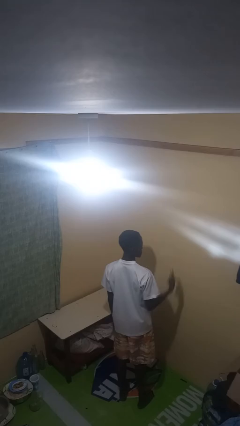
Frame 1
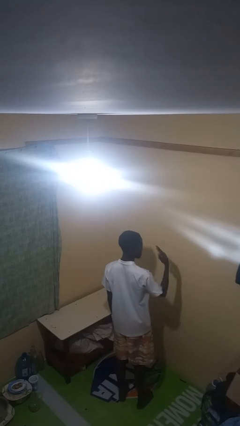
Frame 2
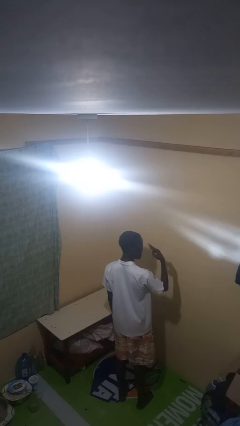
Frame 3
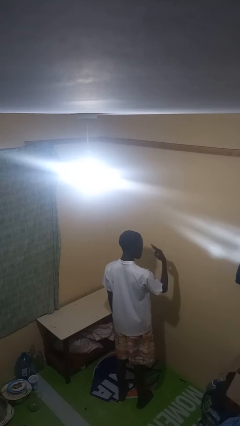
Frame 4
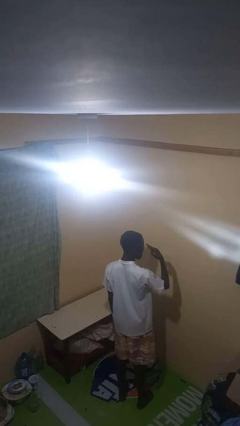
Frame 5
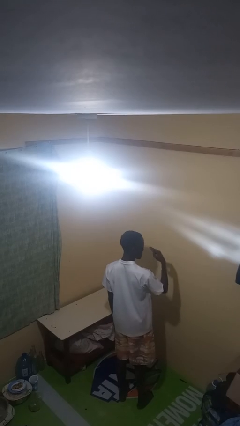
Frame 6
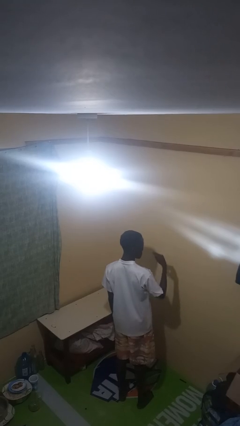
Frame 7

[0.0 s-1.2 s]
person gestures watch closely

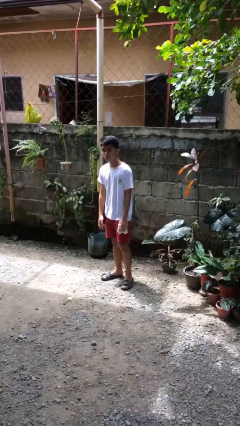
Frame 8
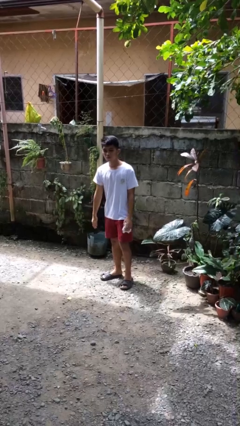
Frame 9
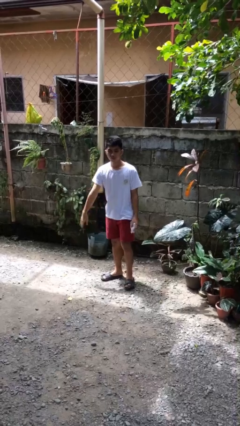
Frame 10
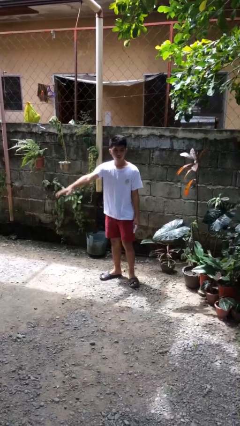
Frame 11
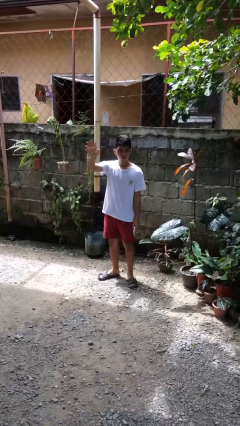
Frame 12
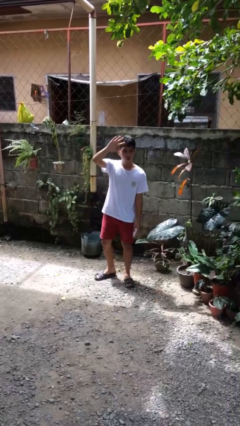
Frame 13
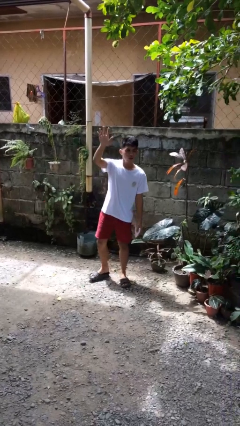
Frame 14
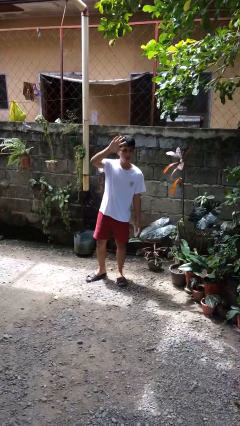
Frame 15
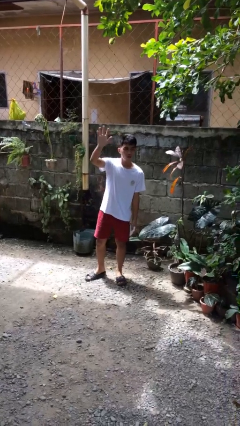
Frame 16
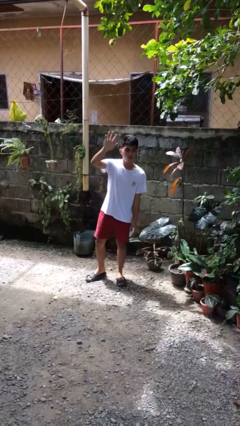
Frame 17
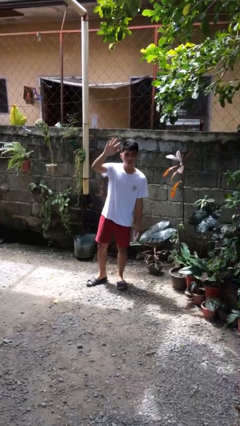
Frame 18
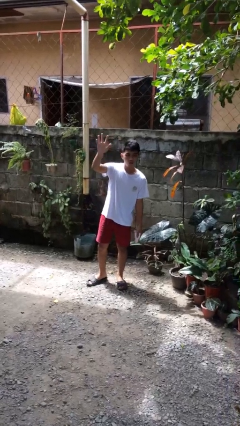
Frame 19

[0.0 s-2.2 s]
person waves at person

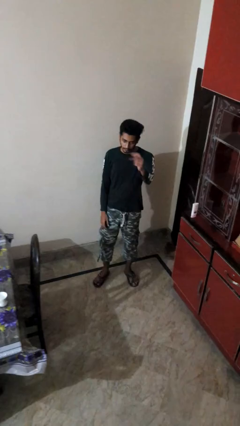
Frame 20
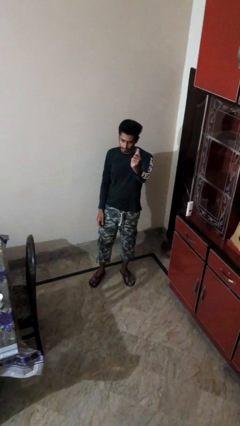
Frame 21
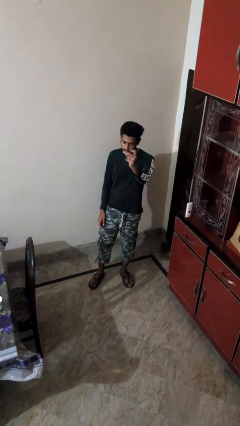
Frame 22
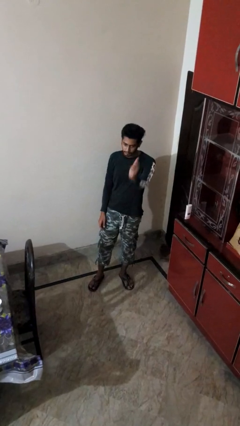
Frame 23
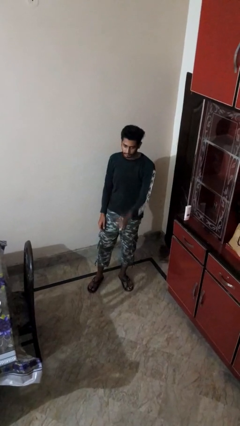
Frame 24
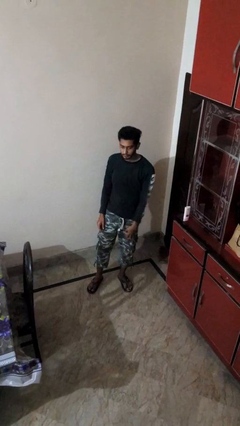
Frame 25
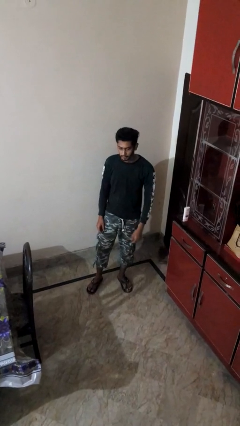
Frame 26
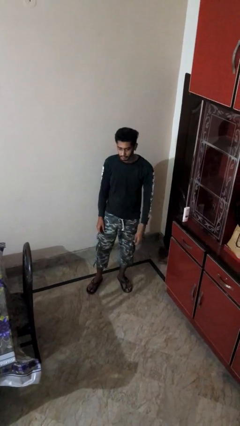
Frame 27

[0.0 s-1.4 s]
person snaps fingers

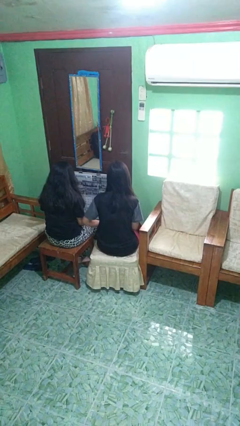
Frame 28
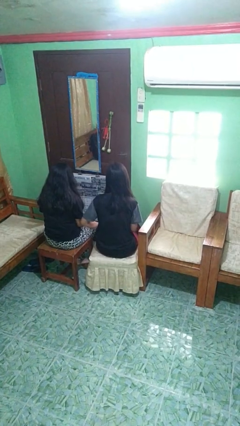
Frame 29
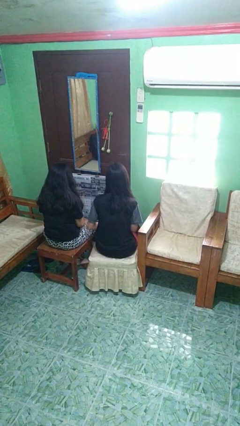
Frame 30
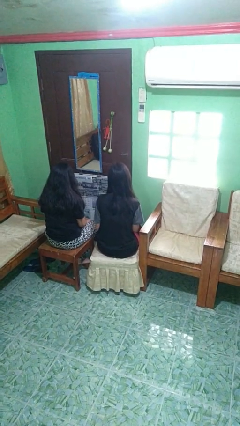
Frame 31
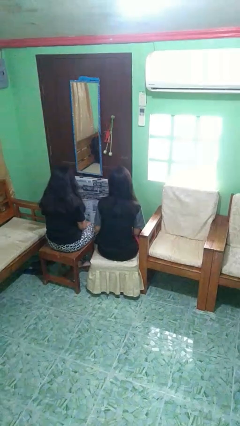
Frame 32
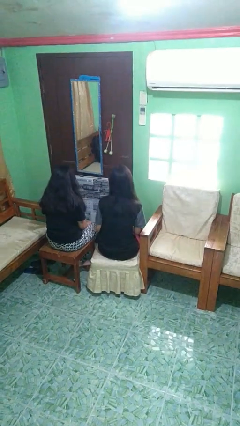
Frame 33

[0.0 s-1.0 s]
person nudges person with elbow

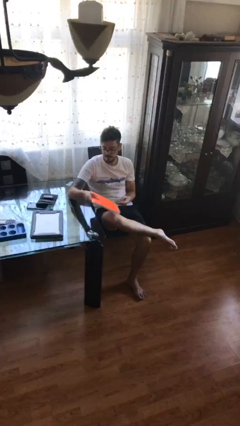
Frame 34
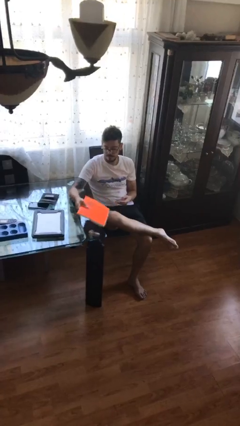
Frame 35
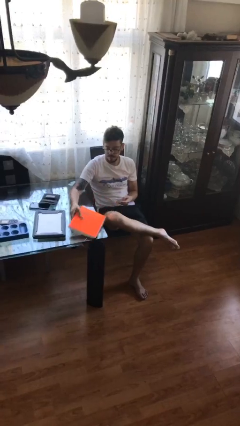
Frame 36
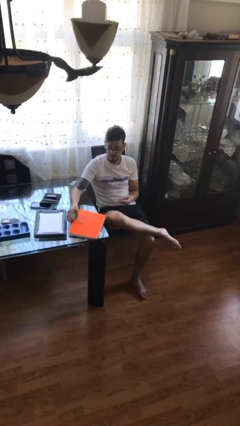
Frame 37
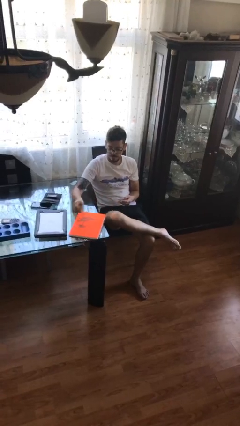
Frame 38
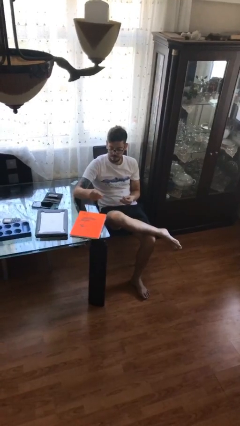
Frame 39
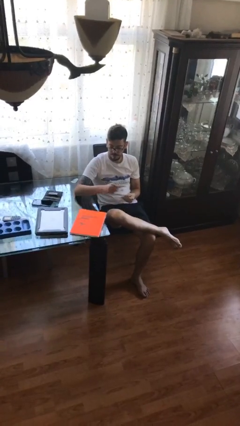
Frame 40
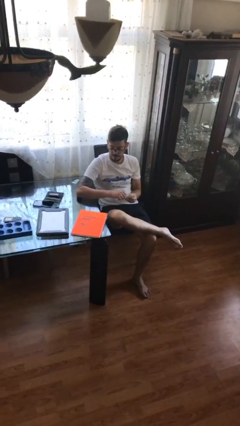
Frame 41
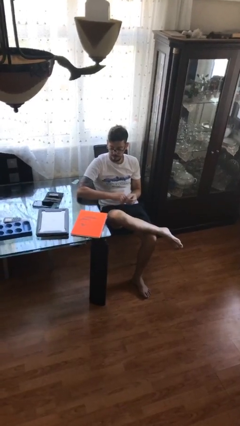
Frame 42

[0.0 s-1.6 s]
person puts down object on table

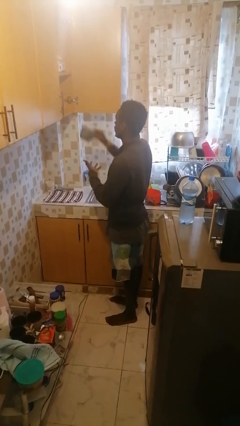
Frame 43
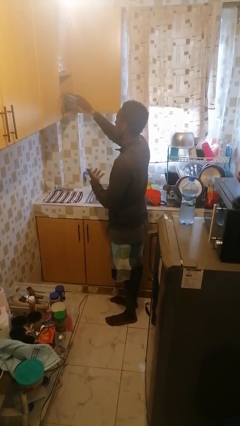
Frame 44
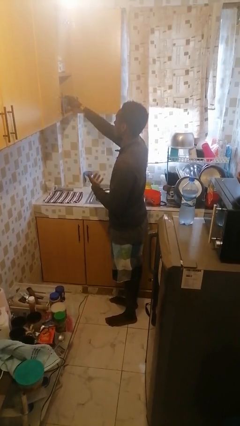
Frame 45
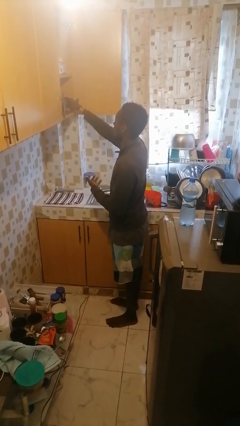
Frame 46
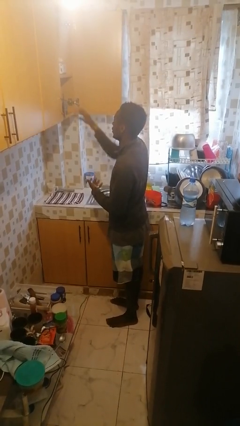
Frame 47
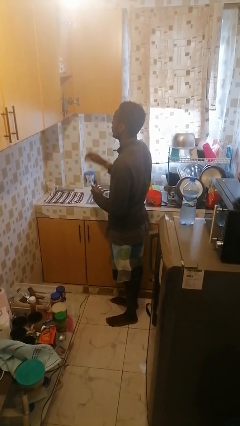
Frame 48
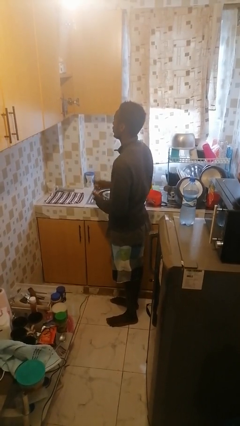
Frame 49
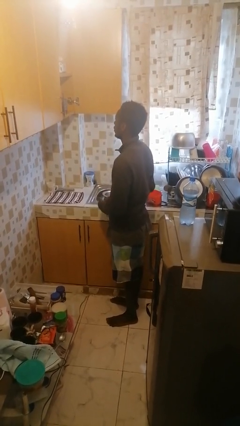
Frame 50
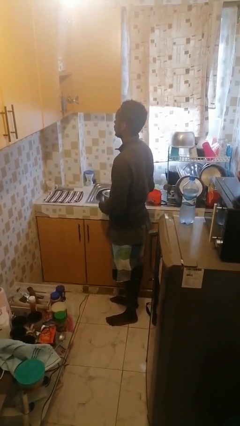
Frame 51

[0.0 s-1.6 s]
person puts down object into cabinet

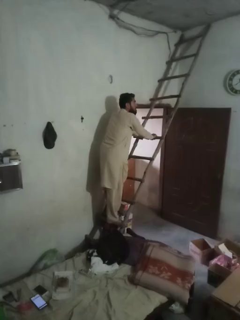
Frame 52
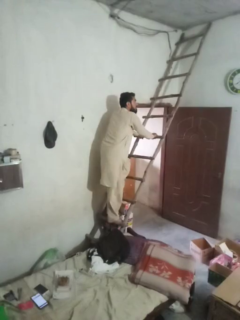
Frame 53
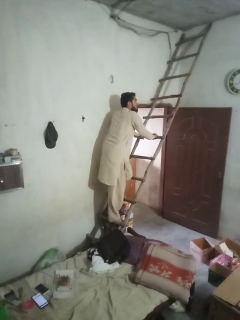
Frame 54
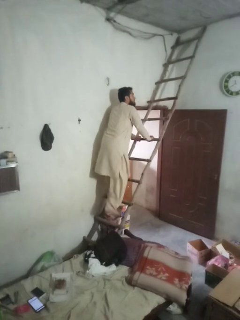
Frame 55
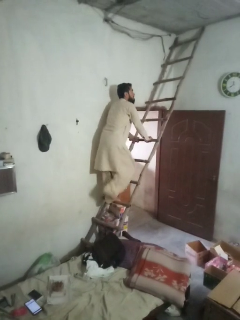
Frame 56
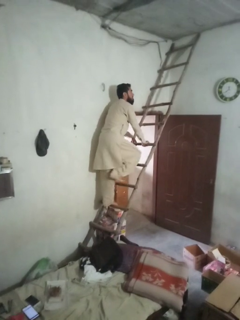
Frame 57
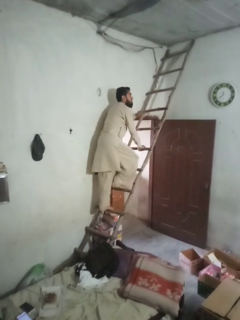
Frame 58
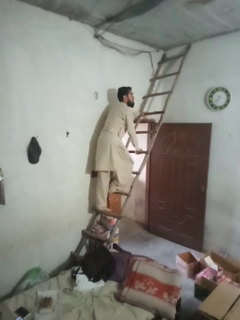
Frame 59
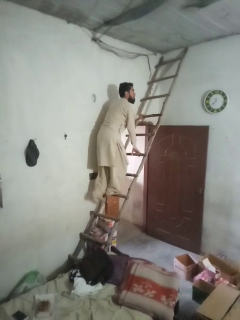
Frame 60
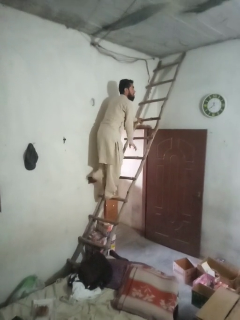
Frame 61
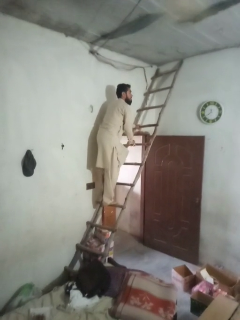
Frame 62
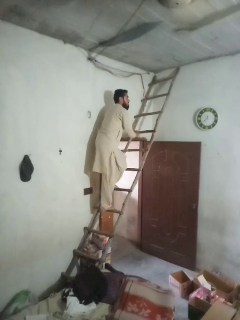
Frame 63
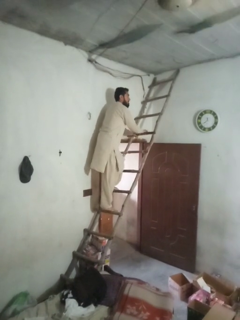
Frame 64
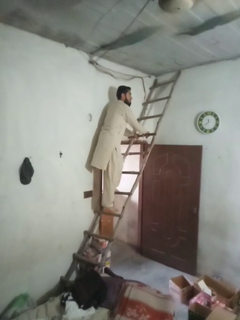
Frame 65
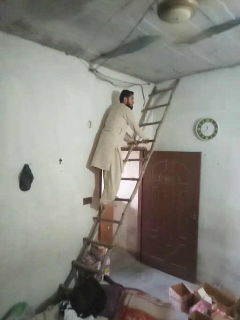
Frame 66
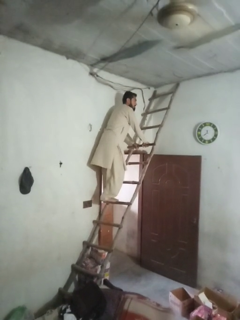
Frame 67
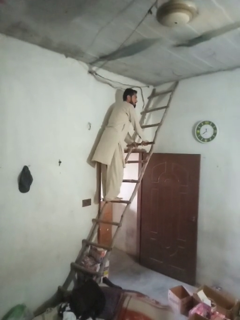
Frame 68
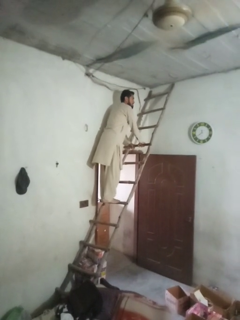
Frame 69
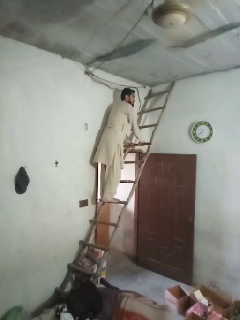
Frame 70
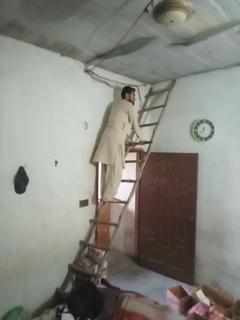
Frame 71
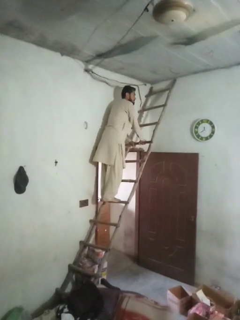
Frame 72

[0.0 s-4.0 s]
person climbs up ladder

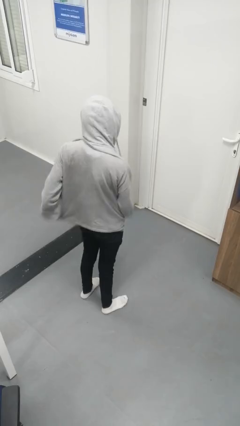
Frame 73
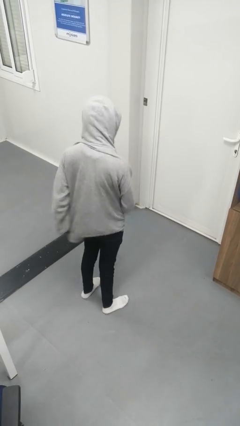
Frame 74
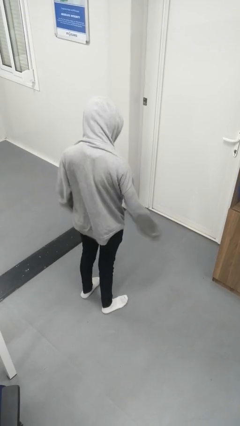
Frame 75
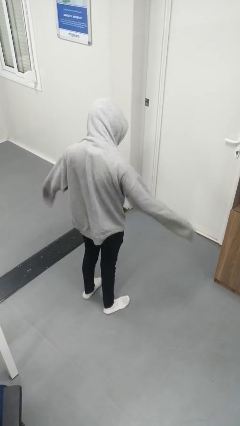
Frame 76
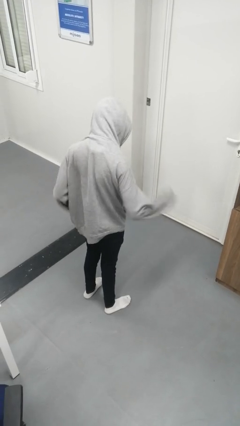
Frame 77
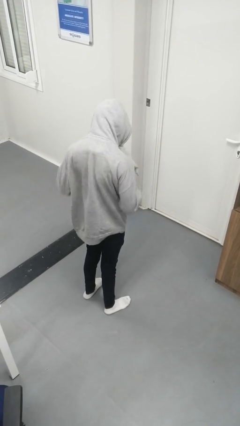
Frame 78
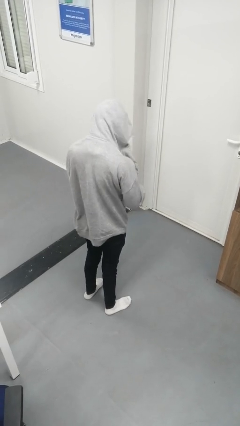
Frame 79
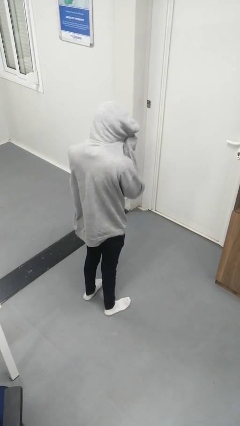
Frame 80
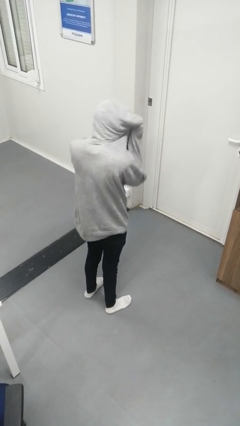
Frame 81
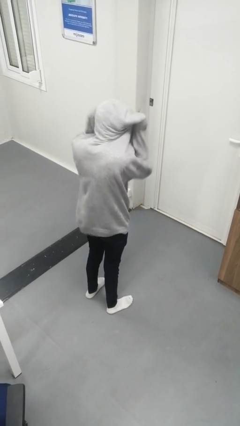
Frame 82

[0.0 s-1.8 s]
person puts on hoodie

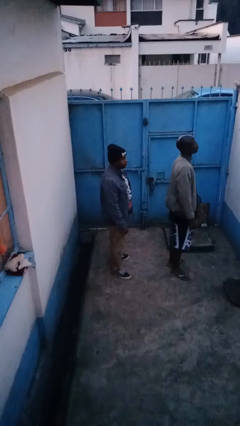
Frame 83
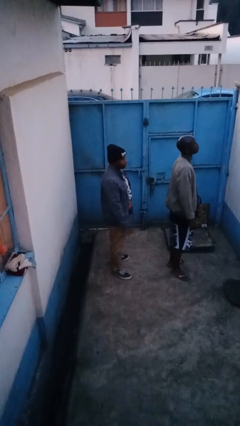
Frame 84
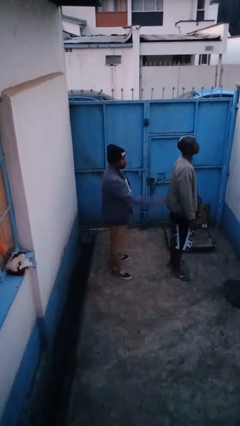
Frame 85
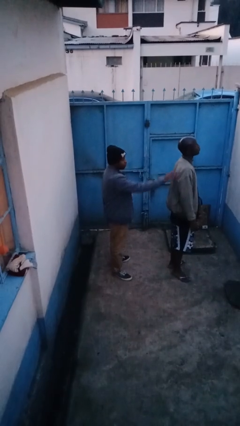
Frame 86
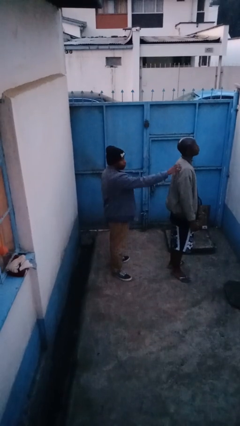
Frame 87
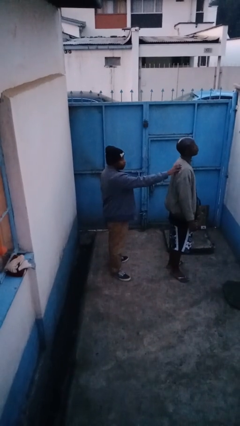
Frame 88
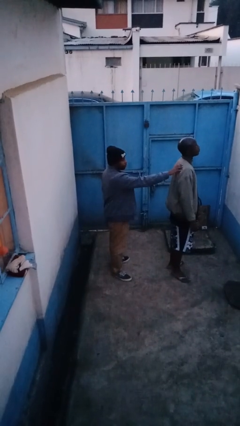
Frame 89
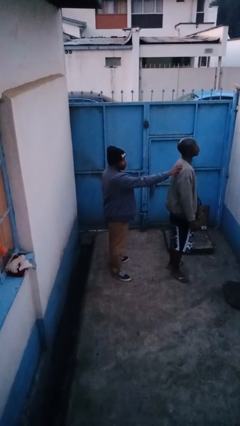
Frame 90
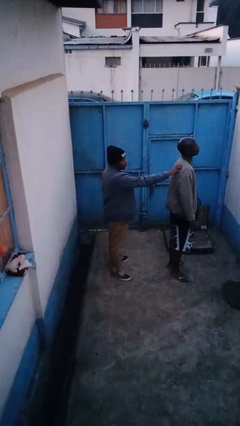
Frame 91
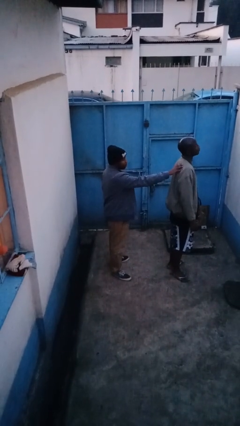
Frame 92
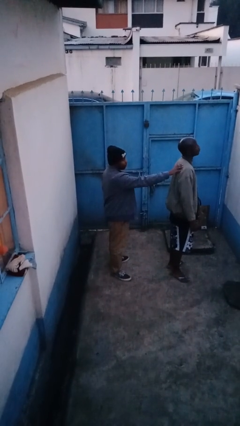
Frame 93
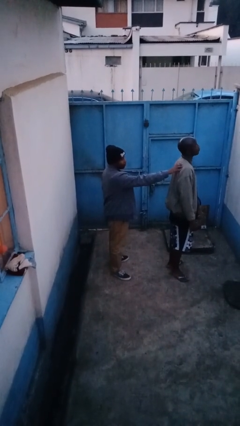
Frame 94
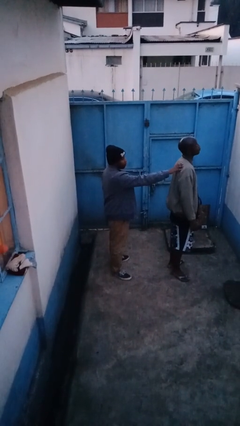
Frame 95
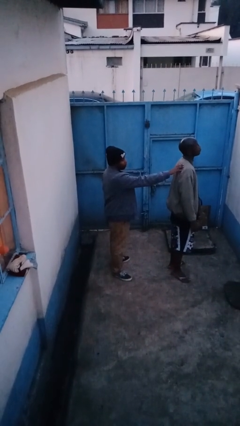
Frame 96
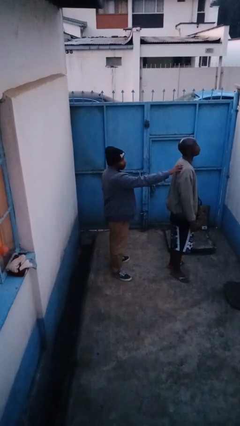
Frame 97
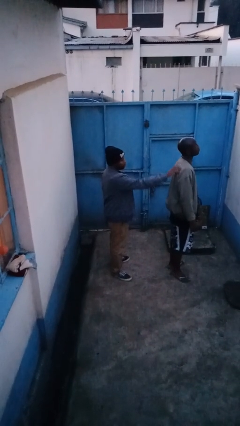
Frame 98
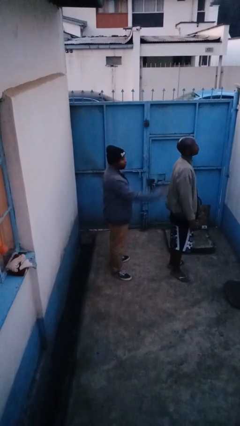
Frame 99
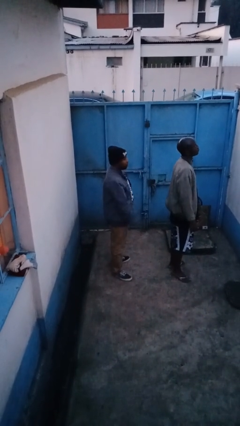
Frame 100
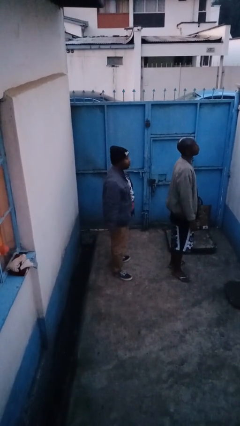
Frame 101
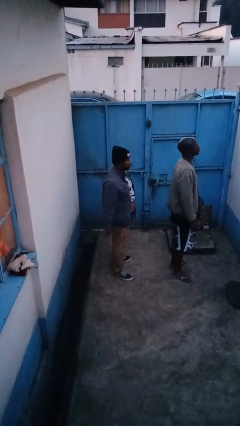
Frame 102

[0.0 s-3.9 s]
person touches back of person
